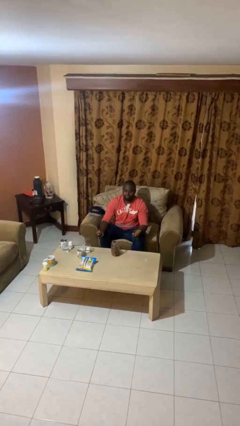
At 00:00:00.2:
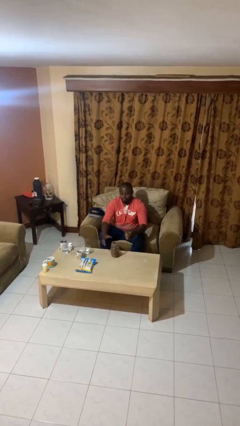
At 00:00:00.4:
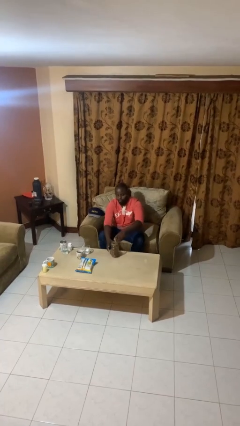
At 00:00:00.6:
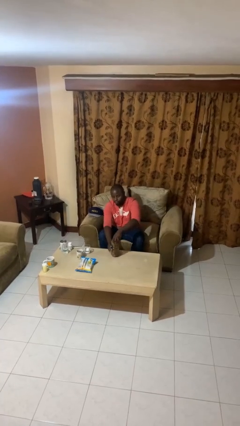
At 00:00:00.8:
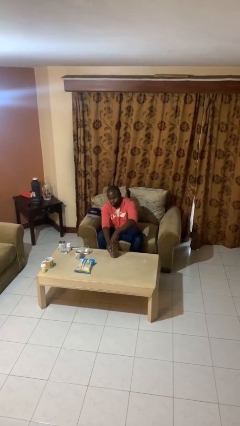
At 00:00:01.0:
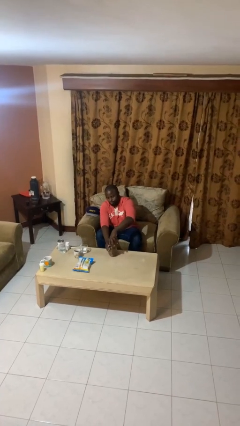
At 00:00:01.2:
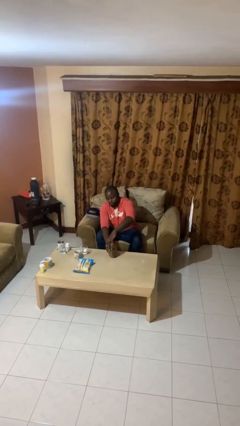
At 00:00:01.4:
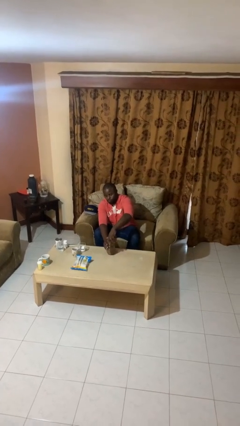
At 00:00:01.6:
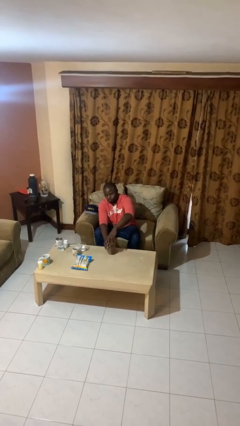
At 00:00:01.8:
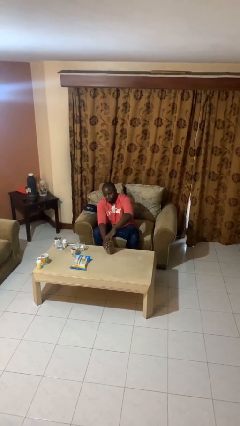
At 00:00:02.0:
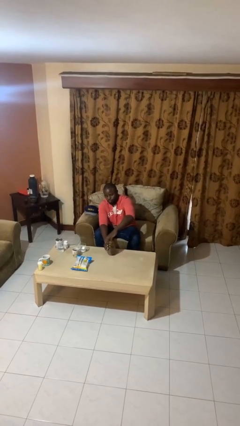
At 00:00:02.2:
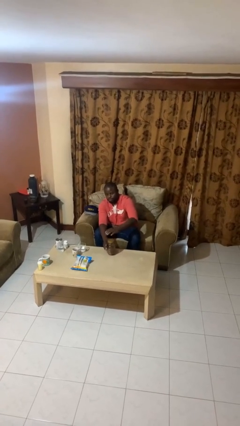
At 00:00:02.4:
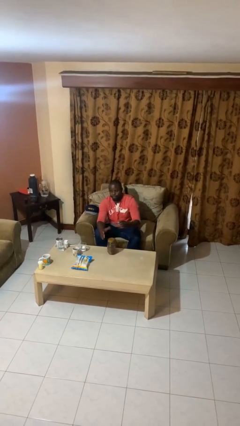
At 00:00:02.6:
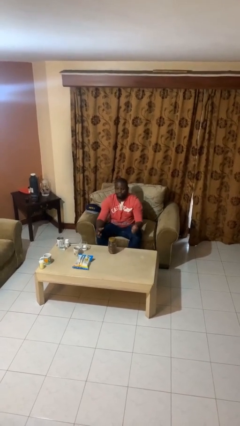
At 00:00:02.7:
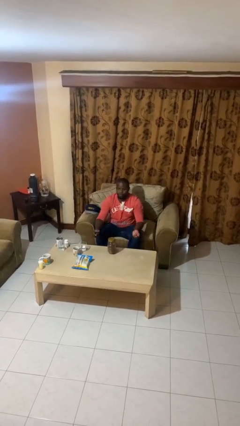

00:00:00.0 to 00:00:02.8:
person closes jar

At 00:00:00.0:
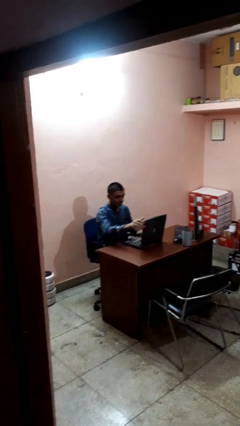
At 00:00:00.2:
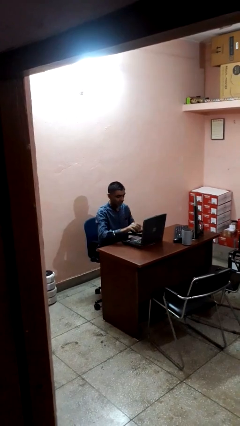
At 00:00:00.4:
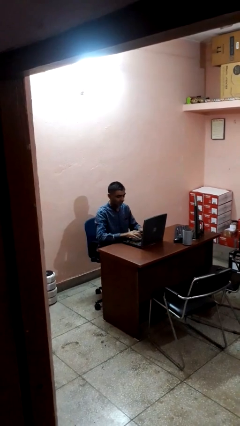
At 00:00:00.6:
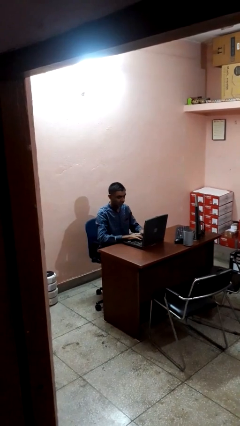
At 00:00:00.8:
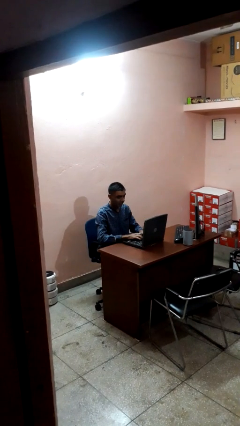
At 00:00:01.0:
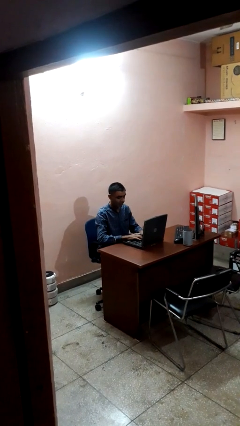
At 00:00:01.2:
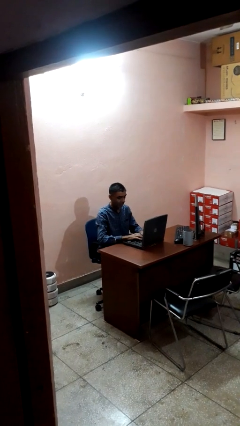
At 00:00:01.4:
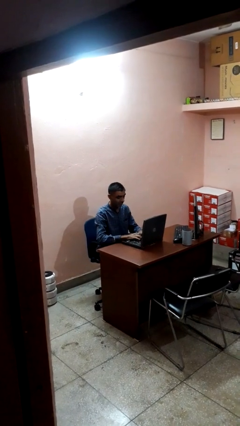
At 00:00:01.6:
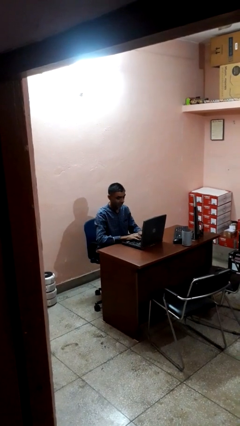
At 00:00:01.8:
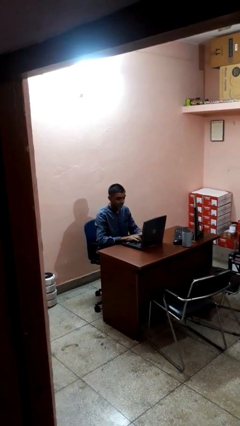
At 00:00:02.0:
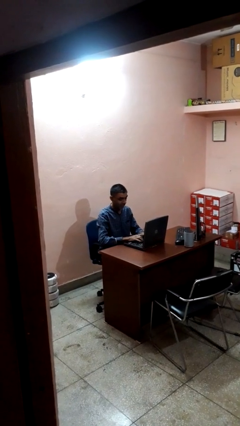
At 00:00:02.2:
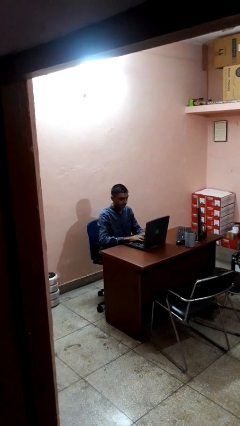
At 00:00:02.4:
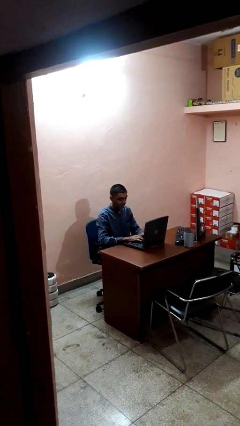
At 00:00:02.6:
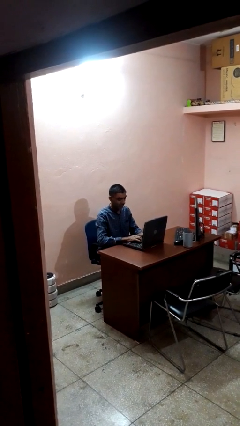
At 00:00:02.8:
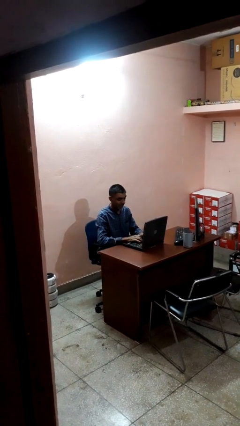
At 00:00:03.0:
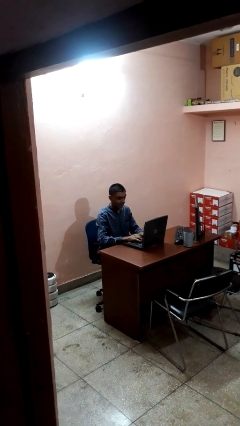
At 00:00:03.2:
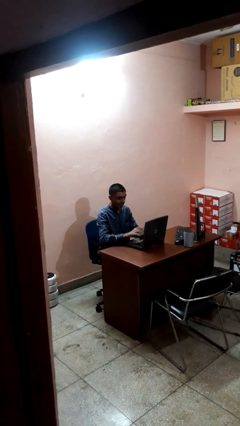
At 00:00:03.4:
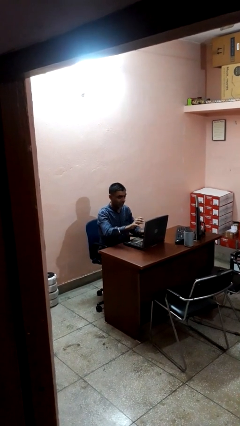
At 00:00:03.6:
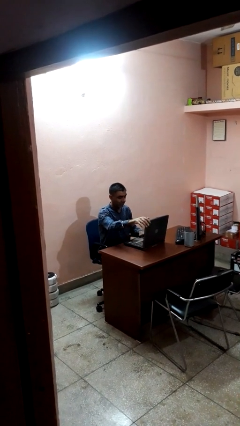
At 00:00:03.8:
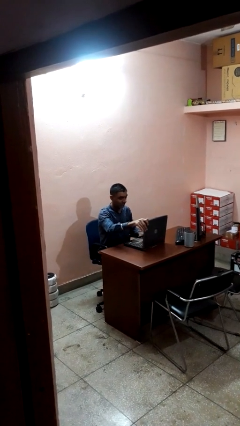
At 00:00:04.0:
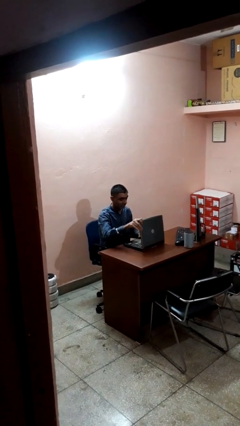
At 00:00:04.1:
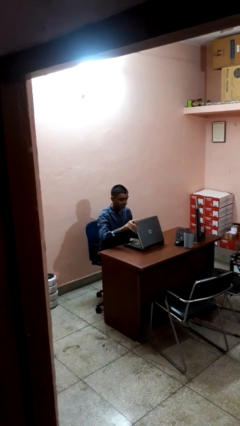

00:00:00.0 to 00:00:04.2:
person interacts with laptop

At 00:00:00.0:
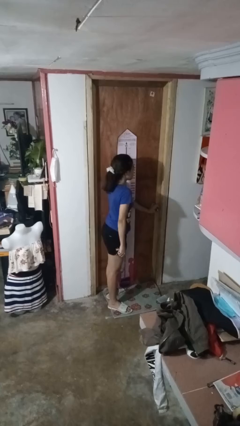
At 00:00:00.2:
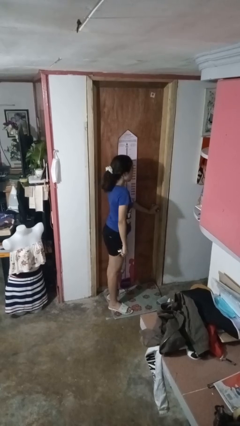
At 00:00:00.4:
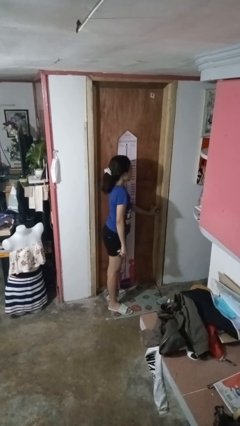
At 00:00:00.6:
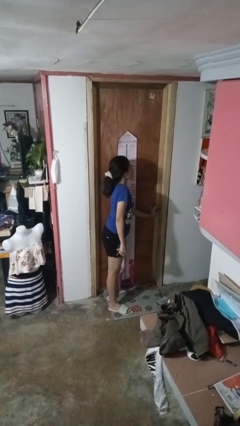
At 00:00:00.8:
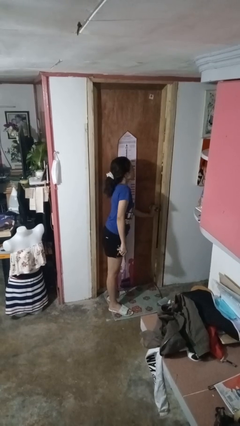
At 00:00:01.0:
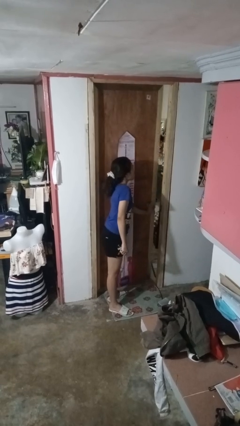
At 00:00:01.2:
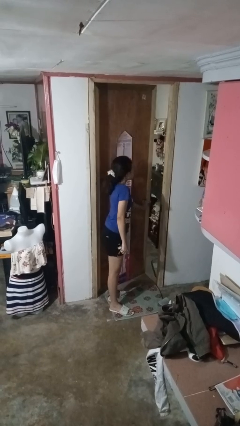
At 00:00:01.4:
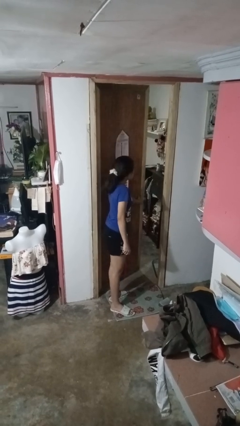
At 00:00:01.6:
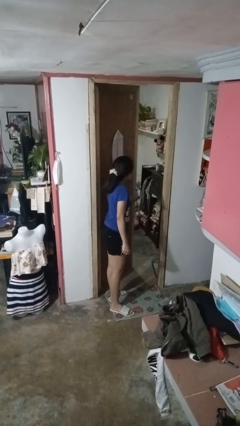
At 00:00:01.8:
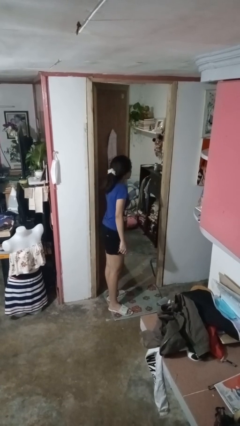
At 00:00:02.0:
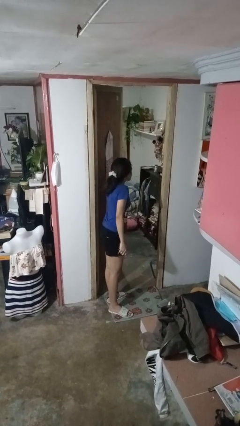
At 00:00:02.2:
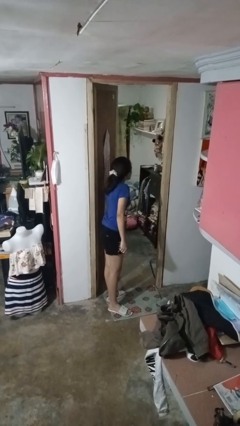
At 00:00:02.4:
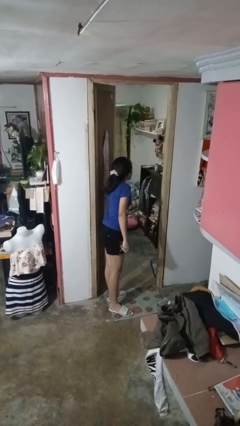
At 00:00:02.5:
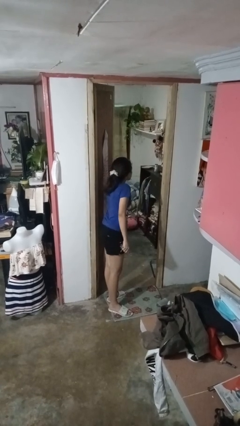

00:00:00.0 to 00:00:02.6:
person opens facility door

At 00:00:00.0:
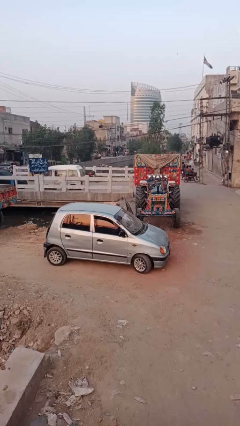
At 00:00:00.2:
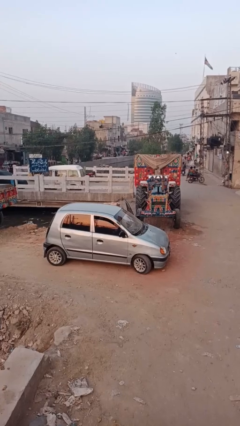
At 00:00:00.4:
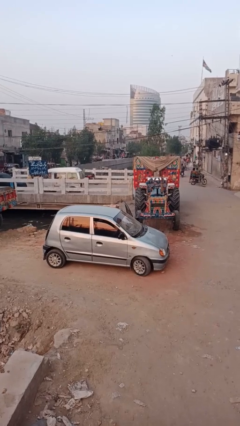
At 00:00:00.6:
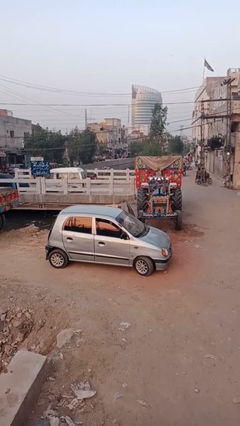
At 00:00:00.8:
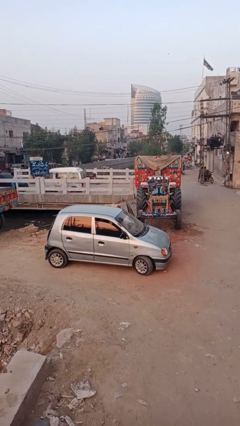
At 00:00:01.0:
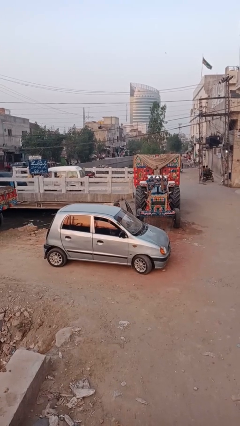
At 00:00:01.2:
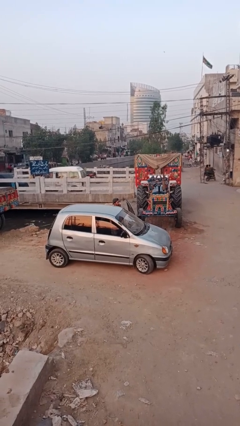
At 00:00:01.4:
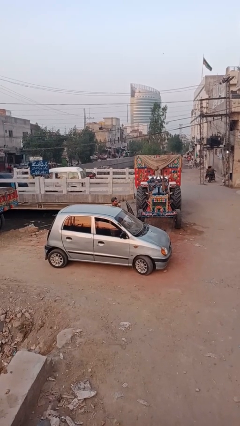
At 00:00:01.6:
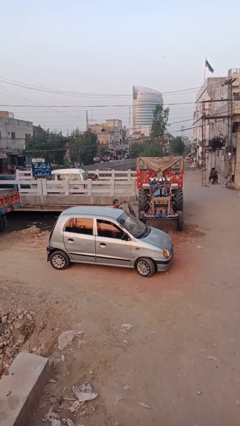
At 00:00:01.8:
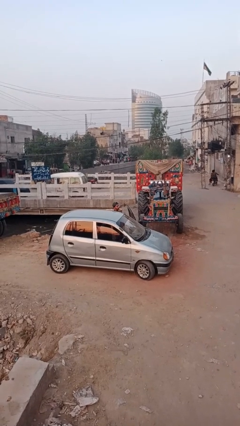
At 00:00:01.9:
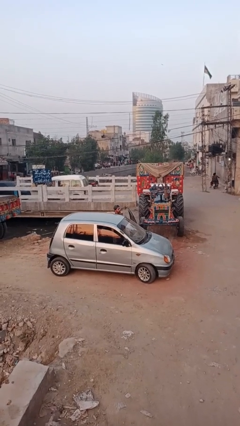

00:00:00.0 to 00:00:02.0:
person exits car

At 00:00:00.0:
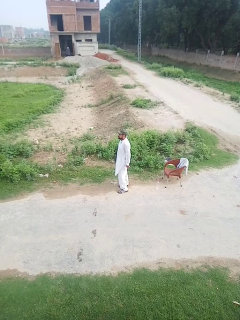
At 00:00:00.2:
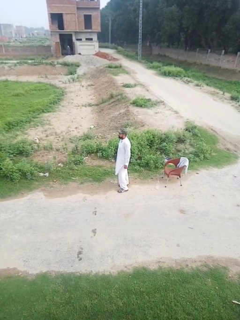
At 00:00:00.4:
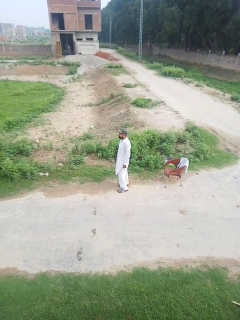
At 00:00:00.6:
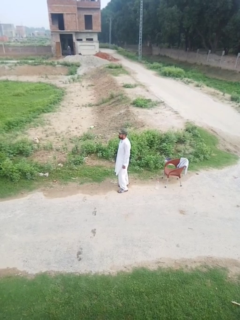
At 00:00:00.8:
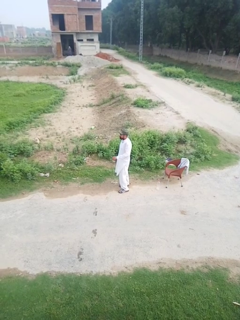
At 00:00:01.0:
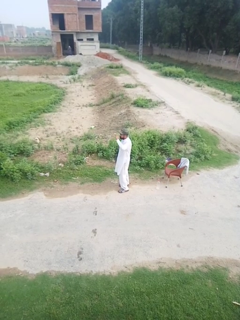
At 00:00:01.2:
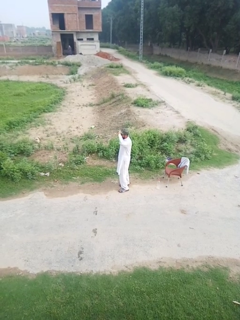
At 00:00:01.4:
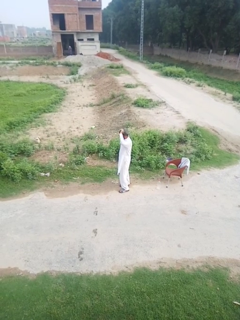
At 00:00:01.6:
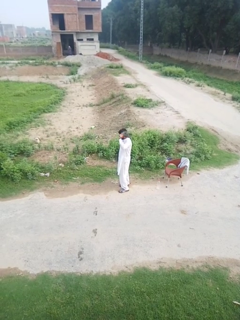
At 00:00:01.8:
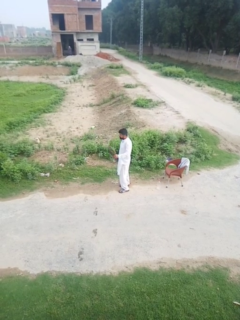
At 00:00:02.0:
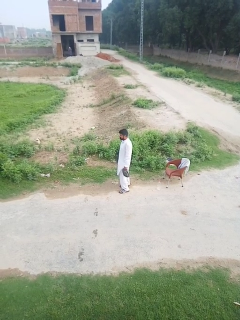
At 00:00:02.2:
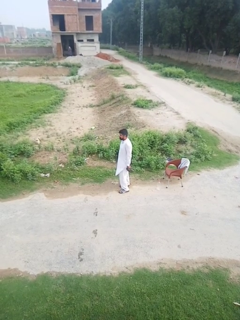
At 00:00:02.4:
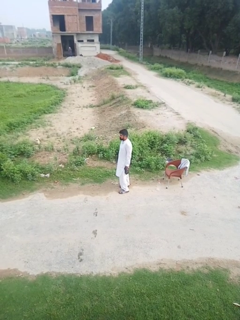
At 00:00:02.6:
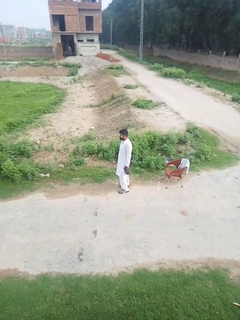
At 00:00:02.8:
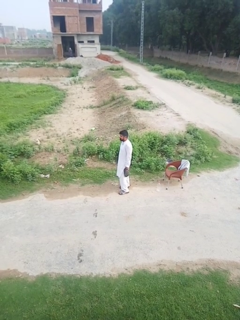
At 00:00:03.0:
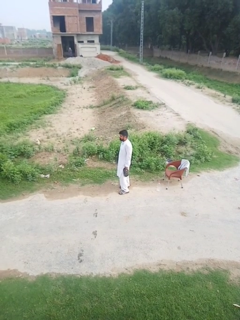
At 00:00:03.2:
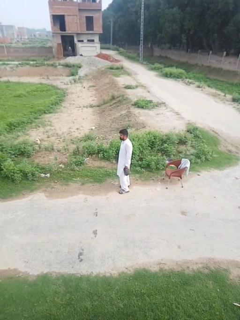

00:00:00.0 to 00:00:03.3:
person takes off hat

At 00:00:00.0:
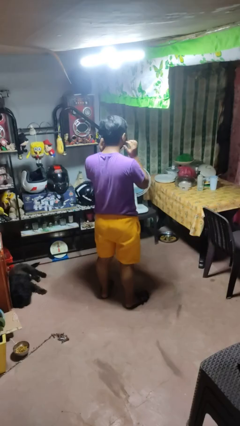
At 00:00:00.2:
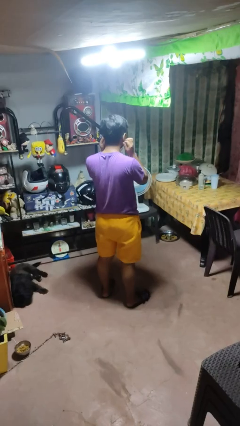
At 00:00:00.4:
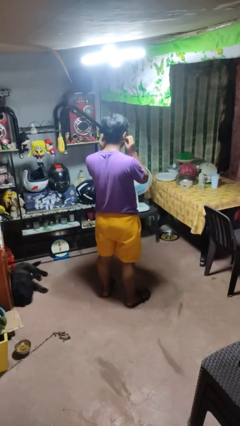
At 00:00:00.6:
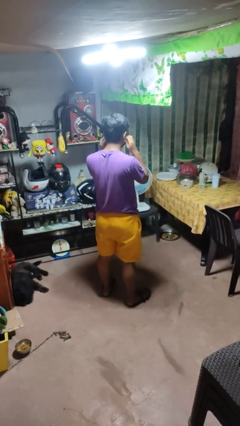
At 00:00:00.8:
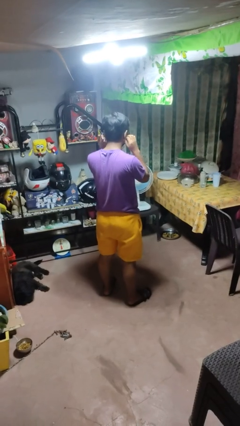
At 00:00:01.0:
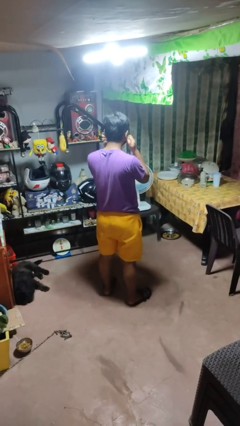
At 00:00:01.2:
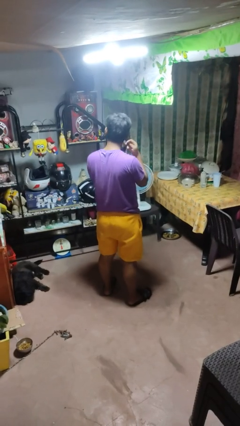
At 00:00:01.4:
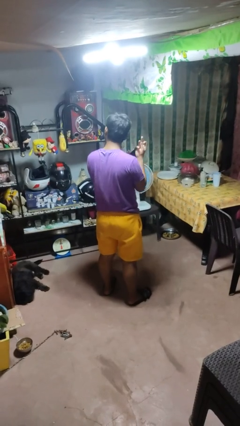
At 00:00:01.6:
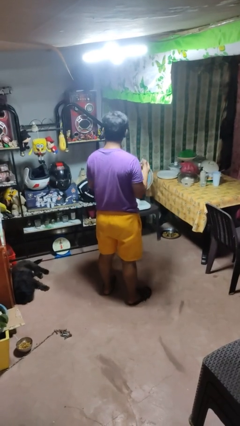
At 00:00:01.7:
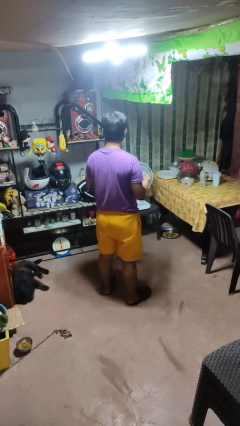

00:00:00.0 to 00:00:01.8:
person takes off facemask

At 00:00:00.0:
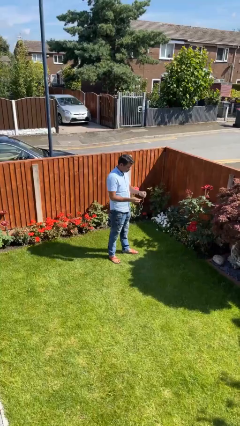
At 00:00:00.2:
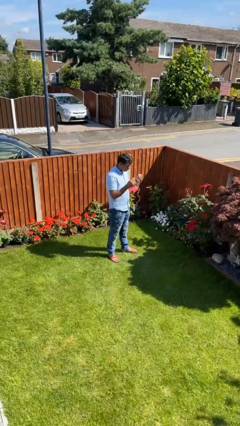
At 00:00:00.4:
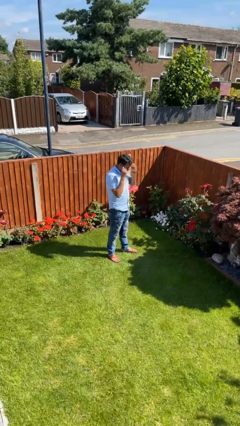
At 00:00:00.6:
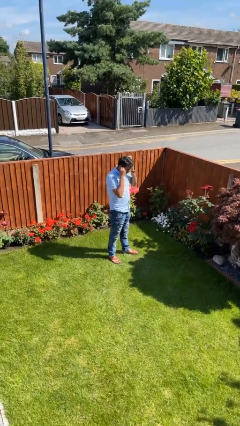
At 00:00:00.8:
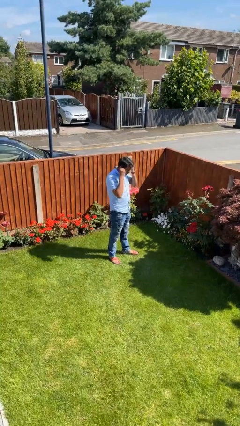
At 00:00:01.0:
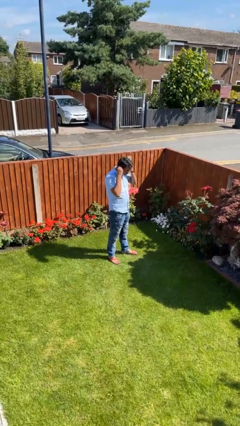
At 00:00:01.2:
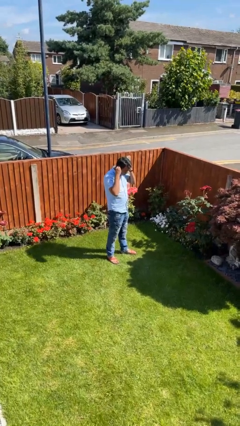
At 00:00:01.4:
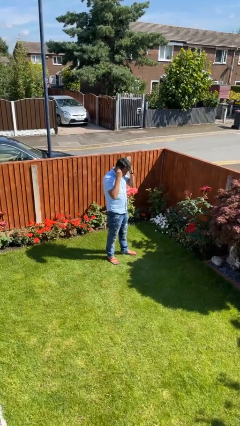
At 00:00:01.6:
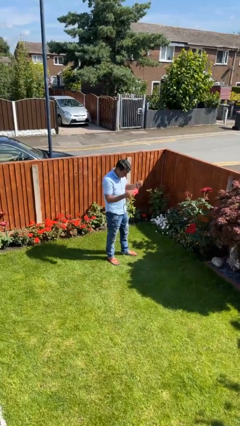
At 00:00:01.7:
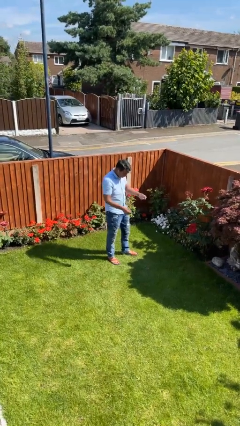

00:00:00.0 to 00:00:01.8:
person puts on headphones
